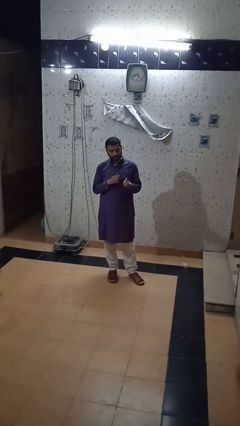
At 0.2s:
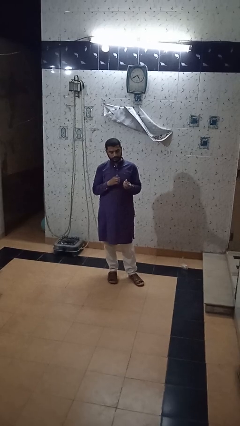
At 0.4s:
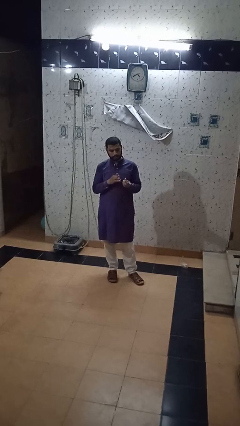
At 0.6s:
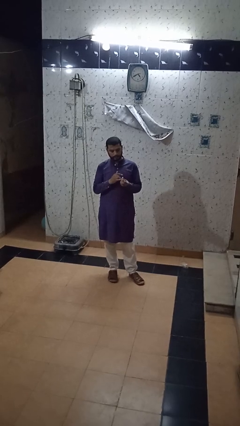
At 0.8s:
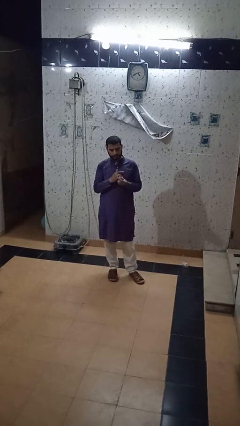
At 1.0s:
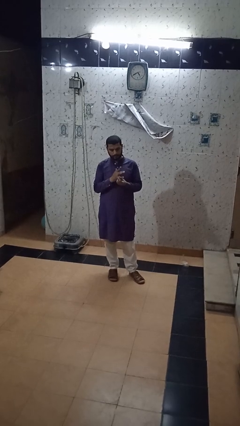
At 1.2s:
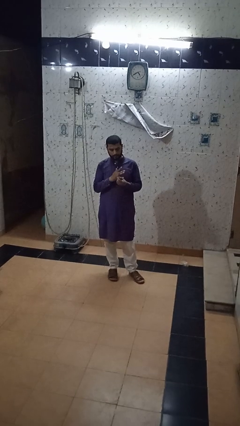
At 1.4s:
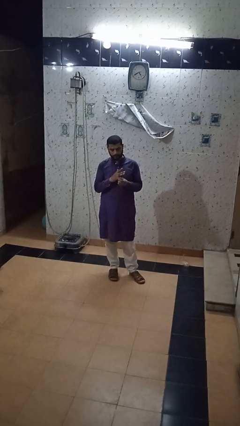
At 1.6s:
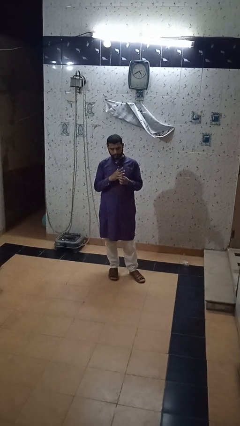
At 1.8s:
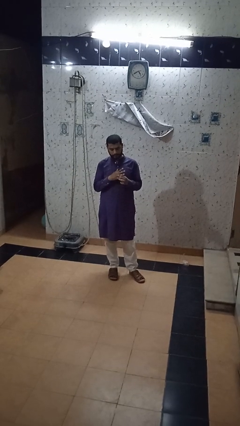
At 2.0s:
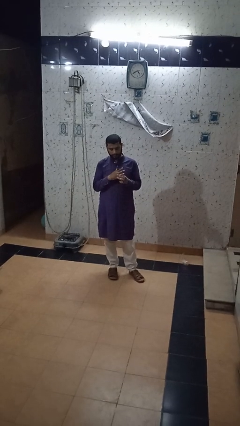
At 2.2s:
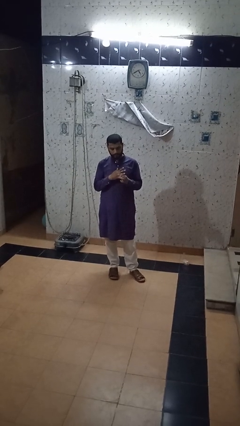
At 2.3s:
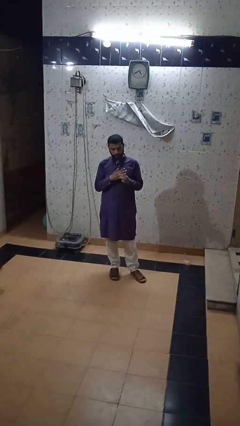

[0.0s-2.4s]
person puts on ring

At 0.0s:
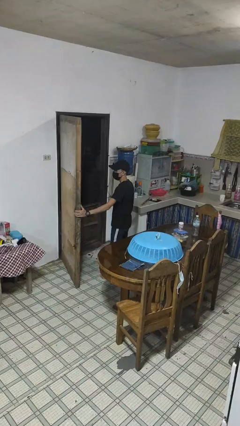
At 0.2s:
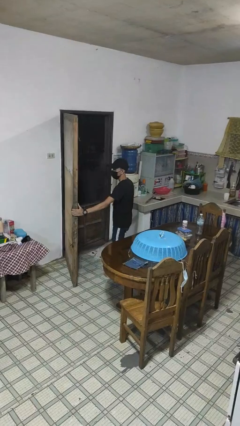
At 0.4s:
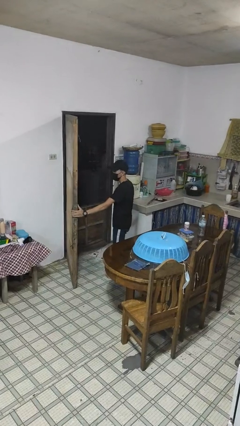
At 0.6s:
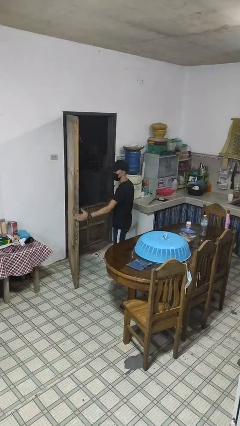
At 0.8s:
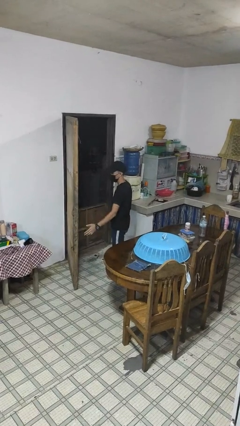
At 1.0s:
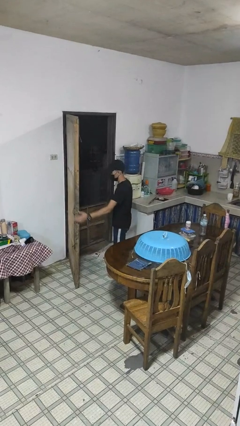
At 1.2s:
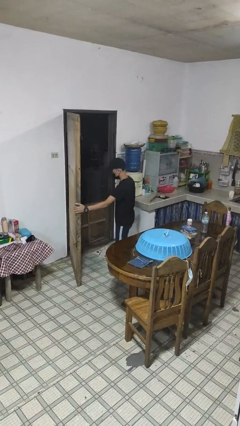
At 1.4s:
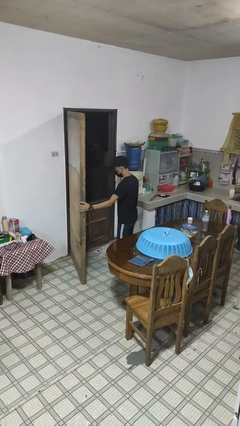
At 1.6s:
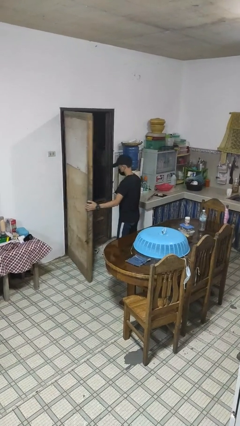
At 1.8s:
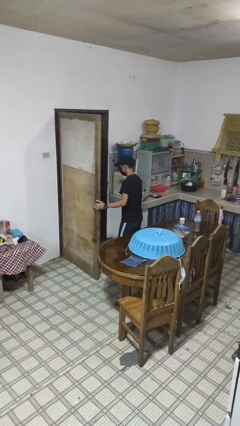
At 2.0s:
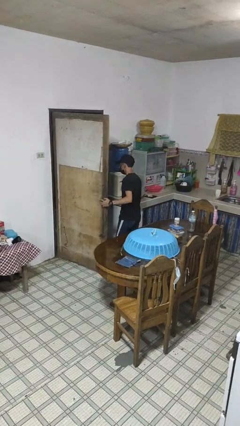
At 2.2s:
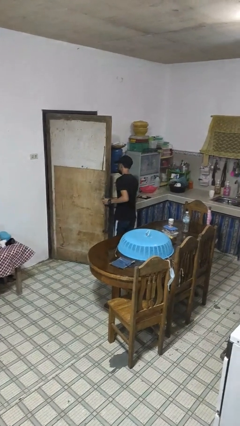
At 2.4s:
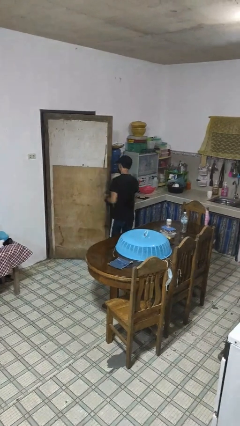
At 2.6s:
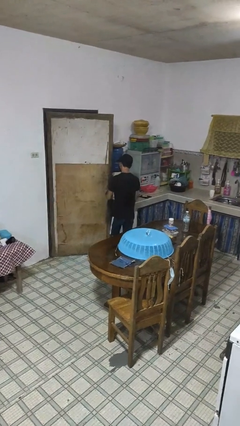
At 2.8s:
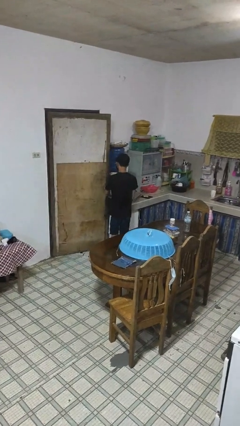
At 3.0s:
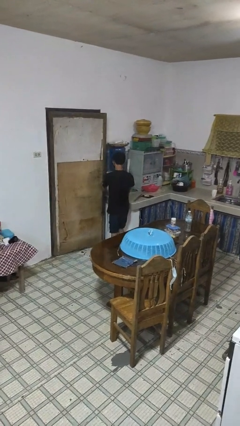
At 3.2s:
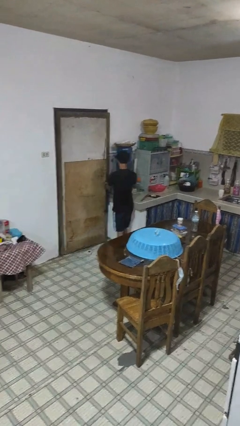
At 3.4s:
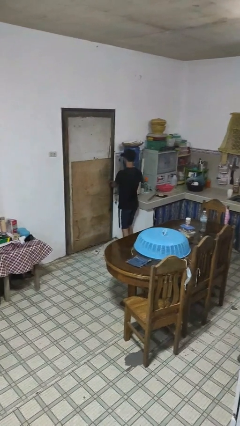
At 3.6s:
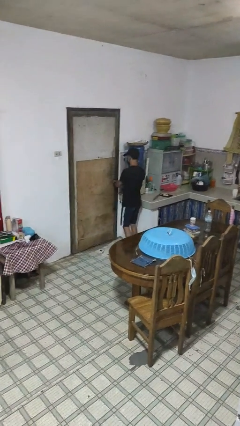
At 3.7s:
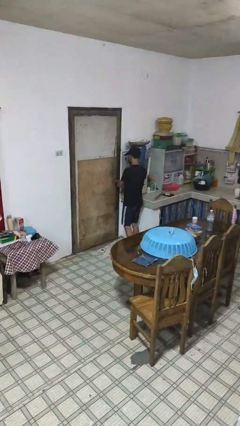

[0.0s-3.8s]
person closes facility door

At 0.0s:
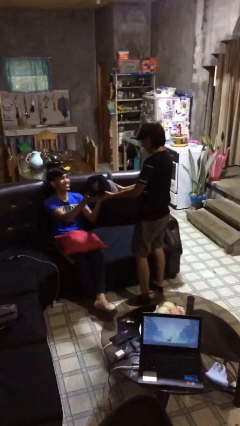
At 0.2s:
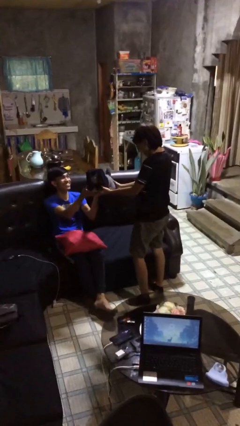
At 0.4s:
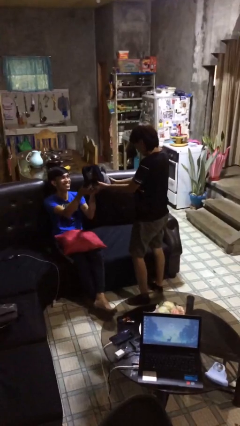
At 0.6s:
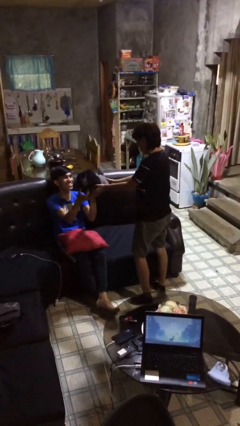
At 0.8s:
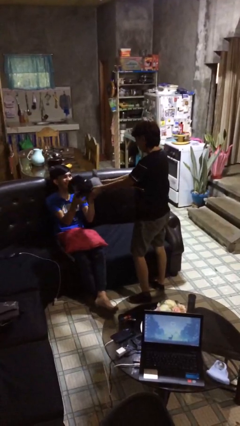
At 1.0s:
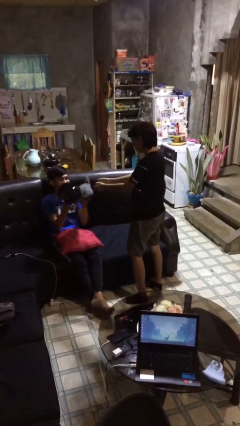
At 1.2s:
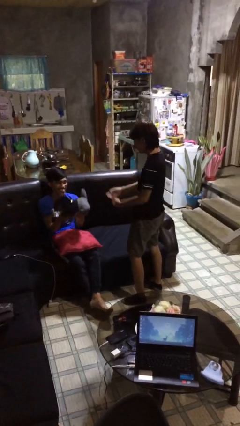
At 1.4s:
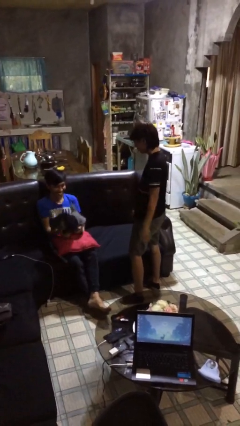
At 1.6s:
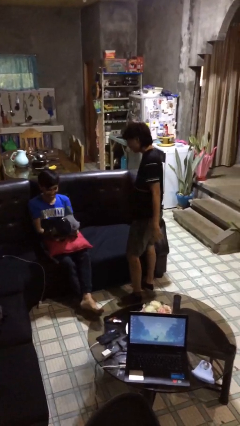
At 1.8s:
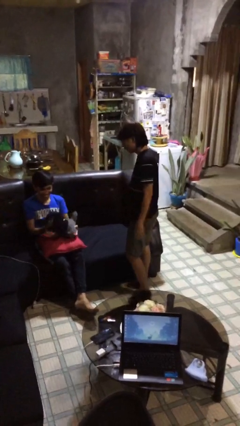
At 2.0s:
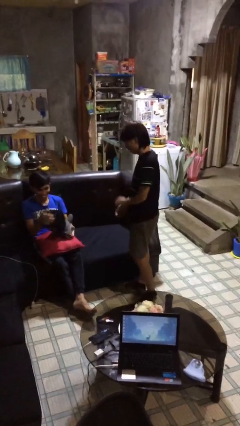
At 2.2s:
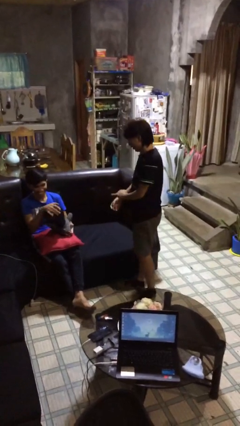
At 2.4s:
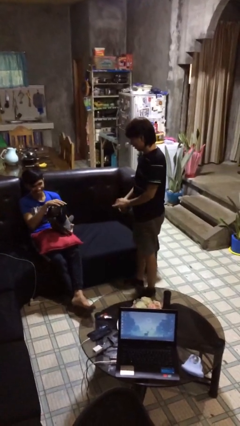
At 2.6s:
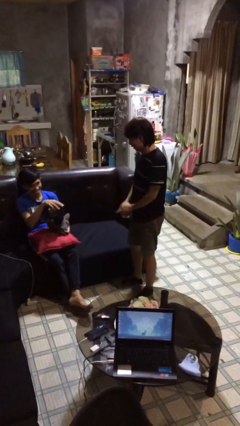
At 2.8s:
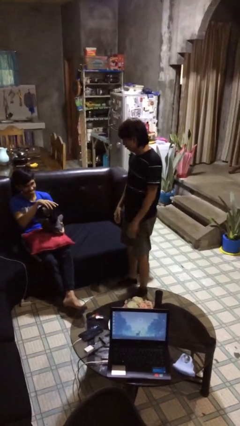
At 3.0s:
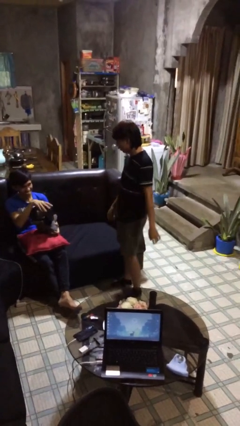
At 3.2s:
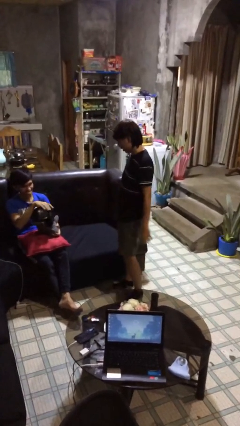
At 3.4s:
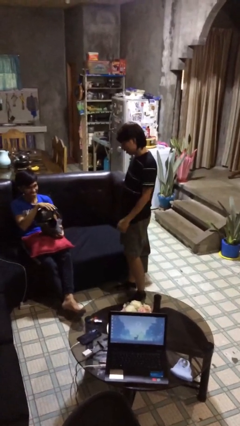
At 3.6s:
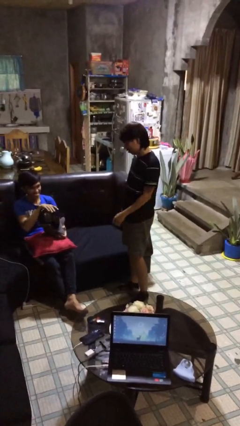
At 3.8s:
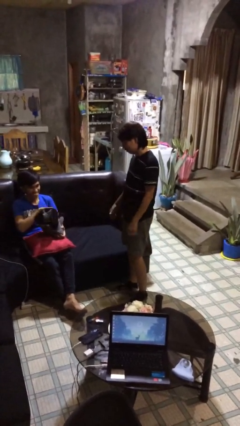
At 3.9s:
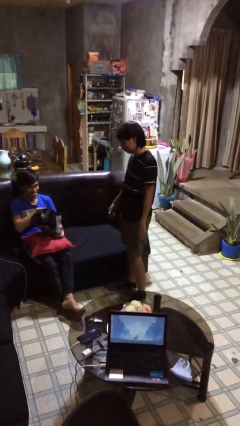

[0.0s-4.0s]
person transfers object to person

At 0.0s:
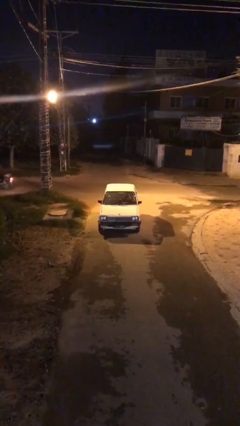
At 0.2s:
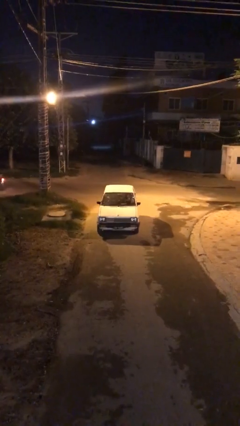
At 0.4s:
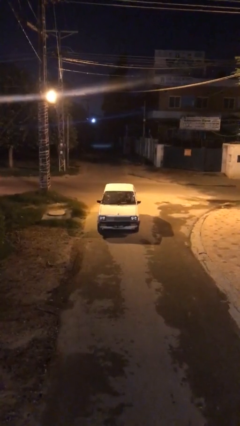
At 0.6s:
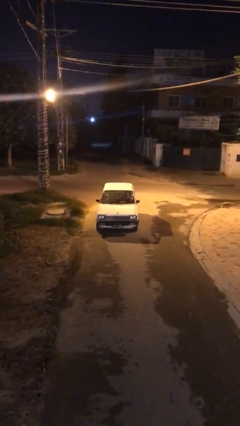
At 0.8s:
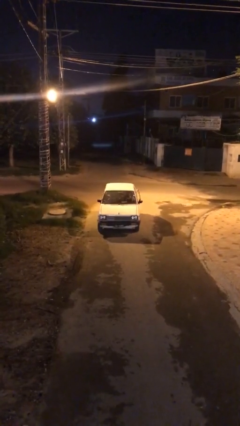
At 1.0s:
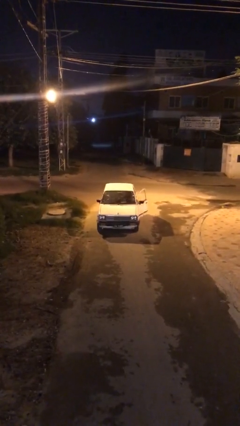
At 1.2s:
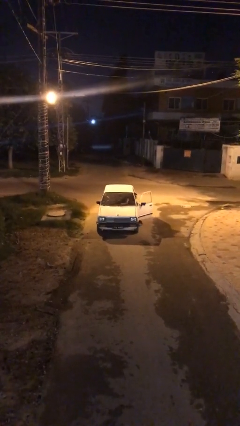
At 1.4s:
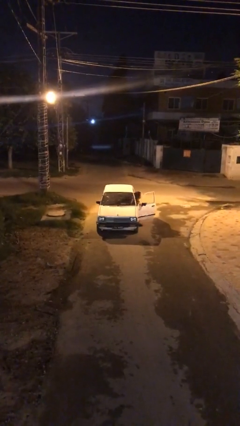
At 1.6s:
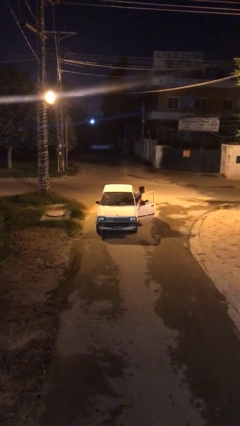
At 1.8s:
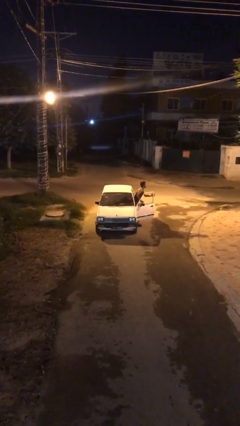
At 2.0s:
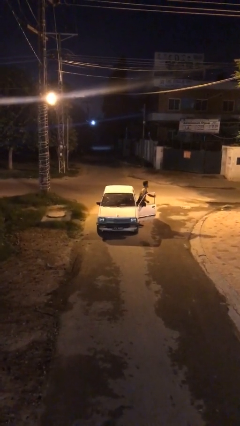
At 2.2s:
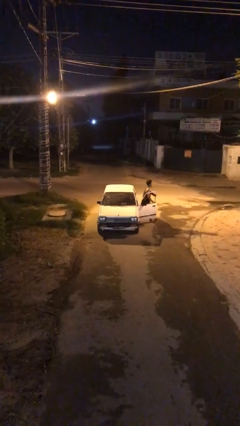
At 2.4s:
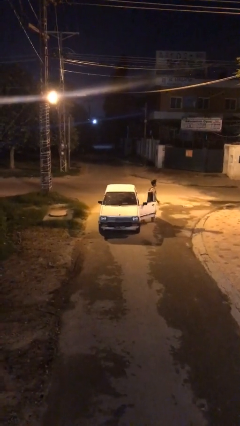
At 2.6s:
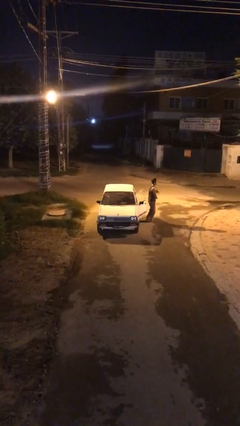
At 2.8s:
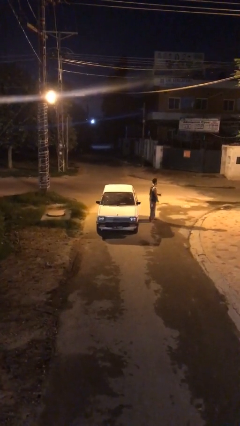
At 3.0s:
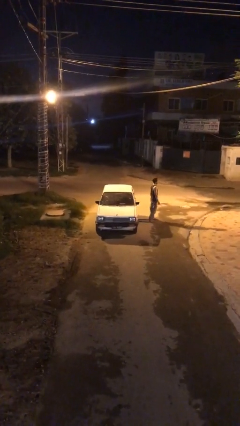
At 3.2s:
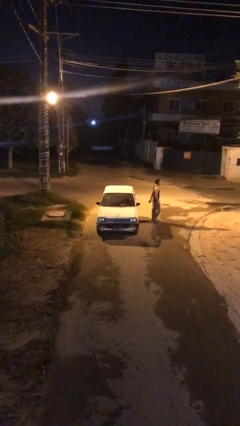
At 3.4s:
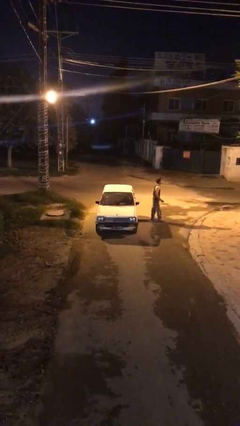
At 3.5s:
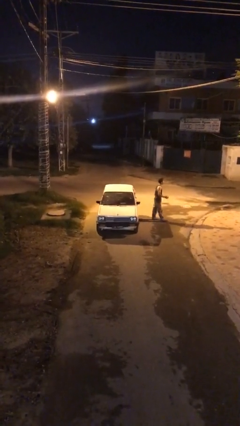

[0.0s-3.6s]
car drops off person

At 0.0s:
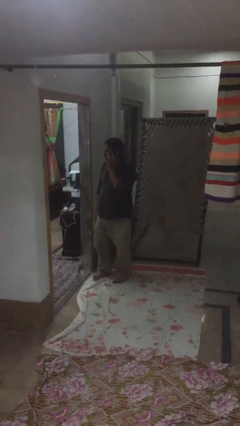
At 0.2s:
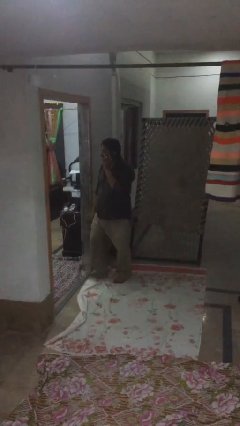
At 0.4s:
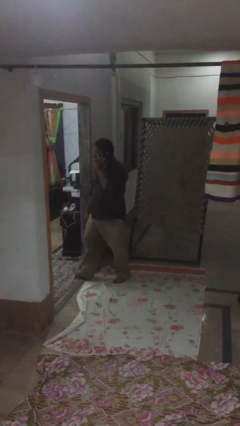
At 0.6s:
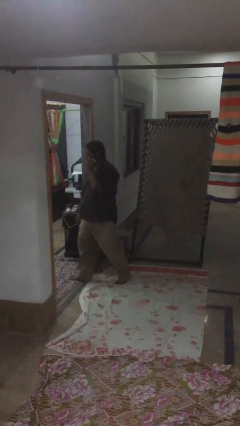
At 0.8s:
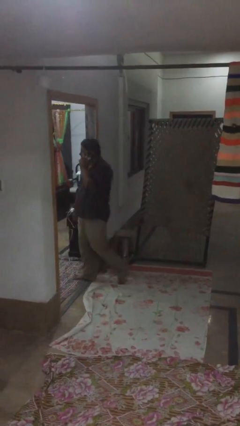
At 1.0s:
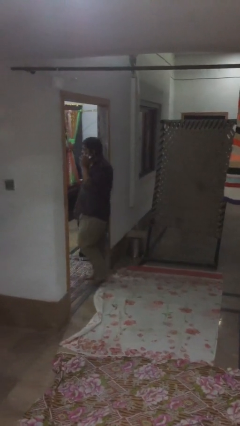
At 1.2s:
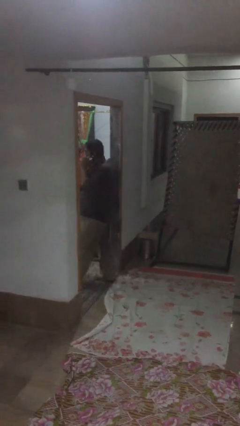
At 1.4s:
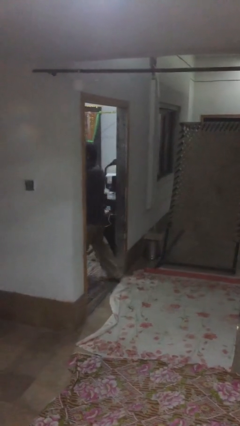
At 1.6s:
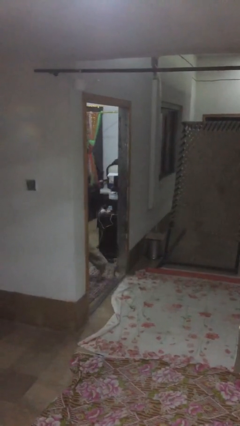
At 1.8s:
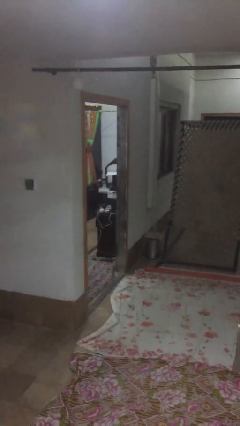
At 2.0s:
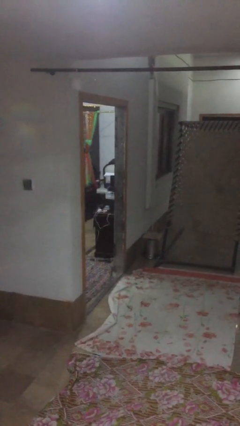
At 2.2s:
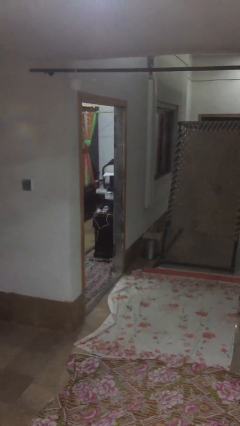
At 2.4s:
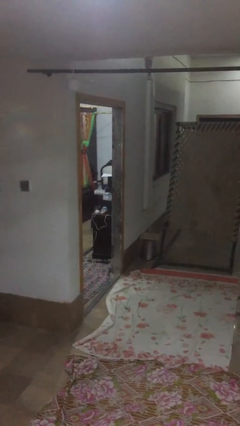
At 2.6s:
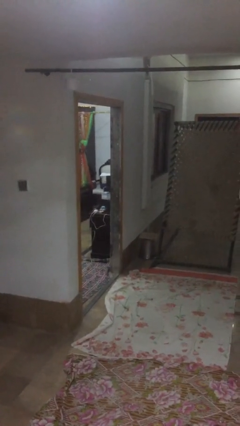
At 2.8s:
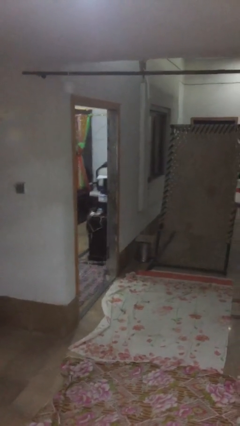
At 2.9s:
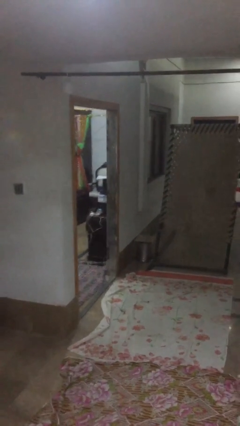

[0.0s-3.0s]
person exits scene through structure

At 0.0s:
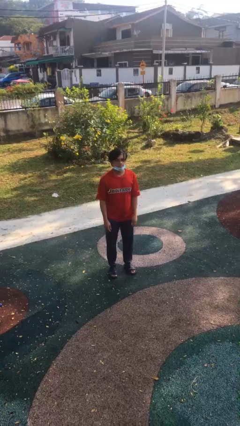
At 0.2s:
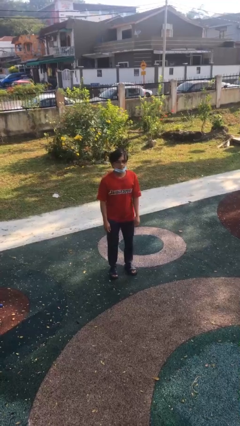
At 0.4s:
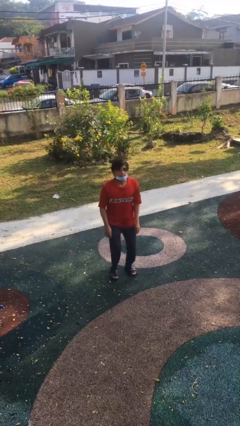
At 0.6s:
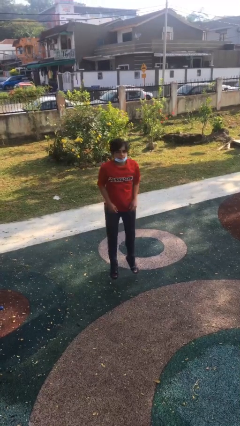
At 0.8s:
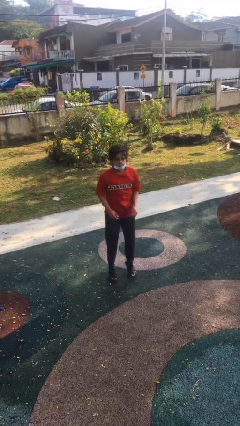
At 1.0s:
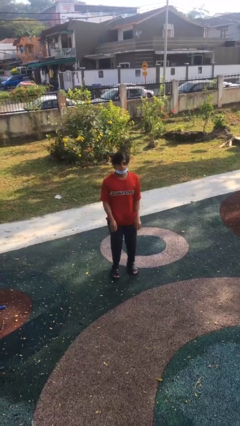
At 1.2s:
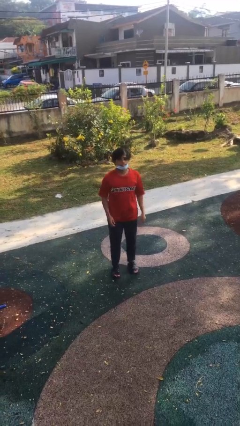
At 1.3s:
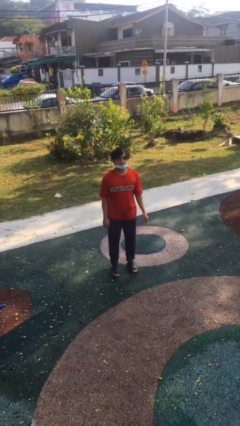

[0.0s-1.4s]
person jumps
